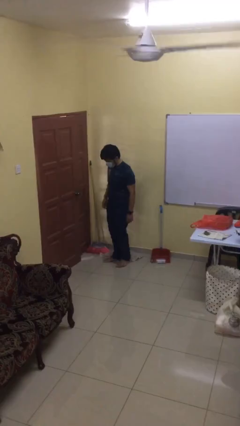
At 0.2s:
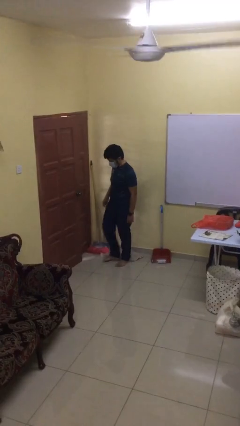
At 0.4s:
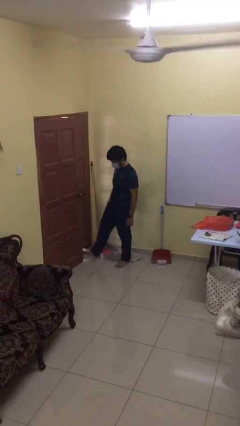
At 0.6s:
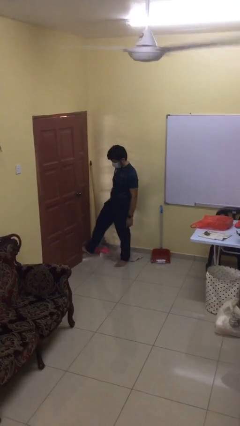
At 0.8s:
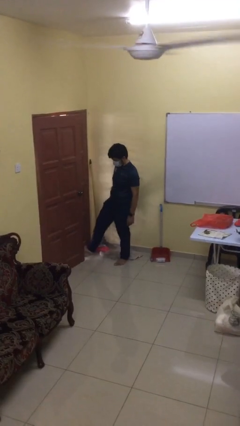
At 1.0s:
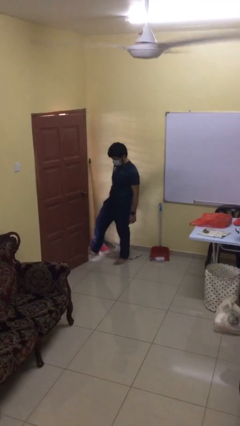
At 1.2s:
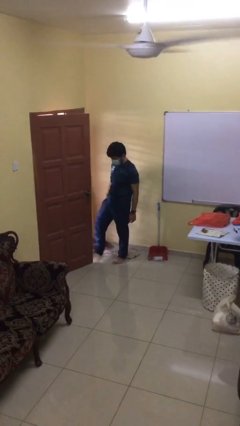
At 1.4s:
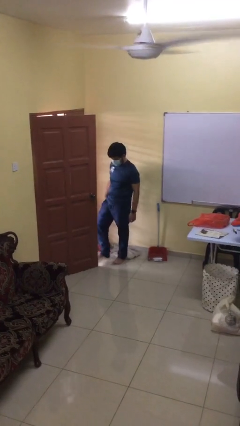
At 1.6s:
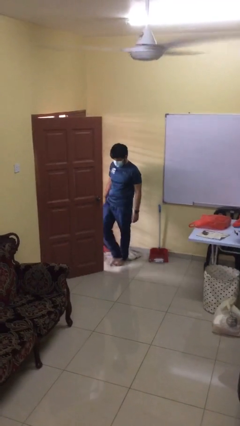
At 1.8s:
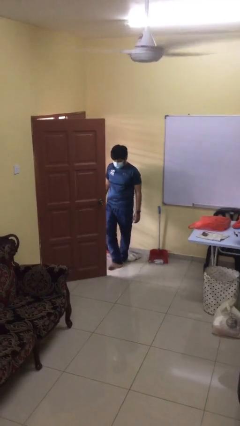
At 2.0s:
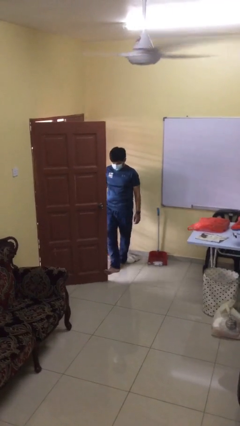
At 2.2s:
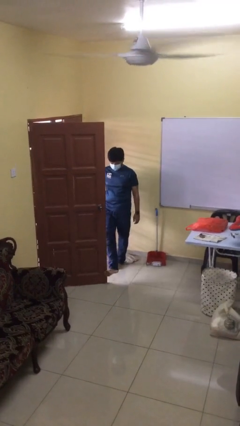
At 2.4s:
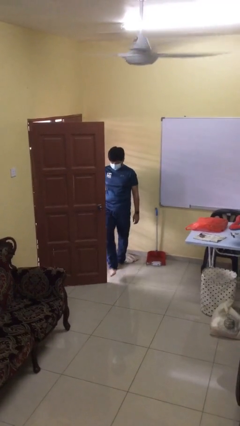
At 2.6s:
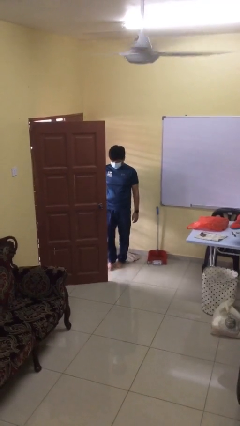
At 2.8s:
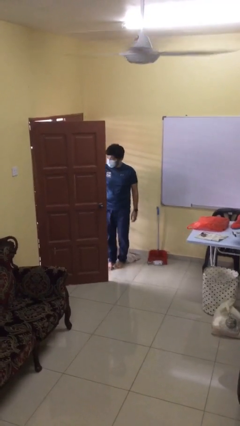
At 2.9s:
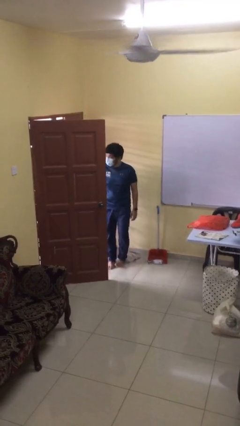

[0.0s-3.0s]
person opens facility door

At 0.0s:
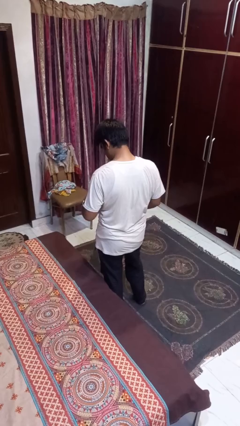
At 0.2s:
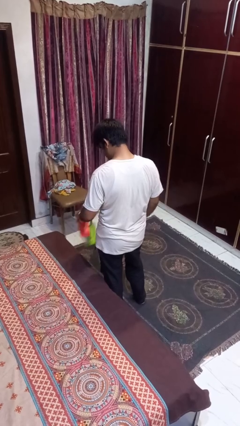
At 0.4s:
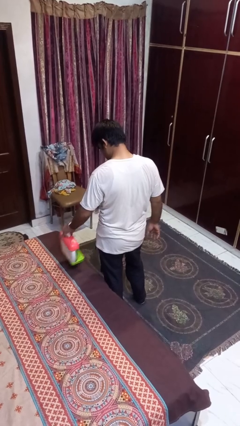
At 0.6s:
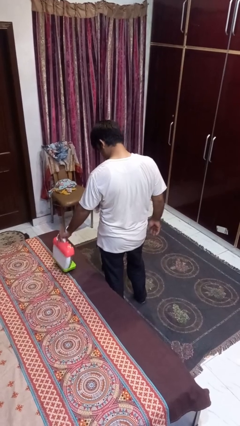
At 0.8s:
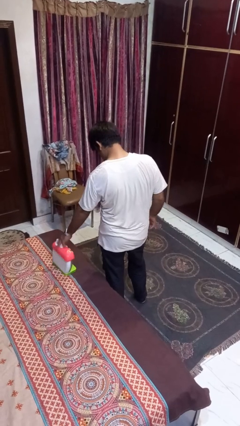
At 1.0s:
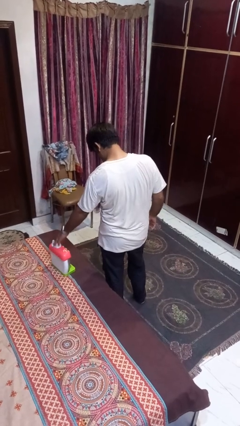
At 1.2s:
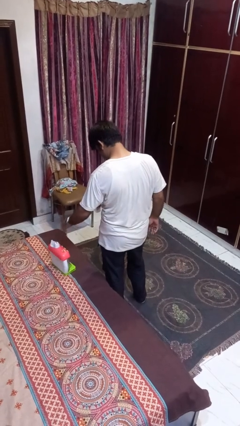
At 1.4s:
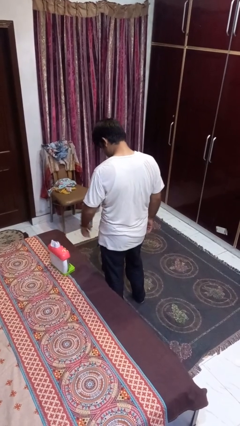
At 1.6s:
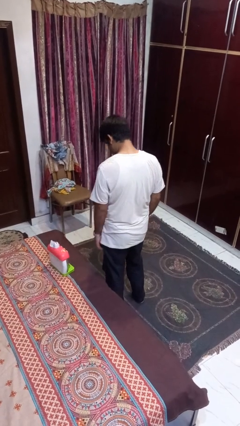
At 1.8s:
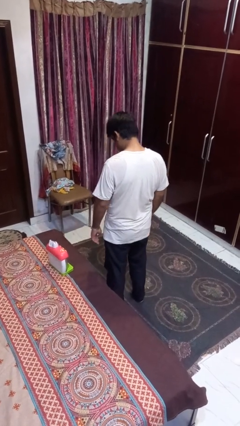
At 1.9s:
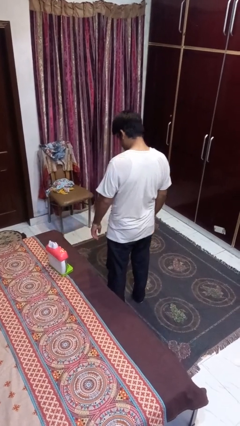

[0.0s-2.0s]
person puts down object on bed

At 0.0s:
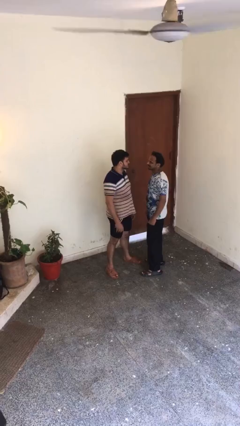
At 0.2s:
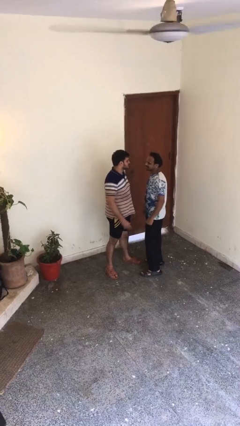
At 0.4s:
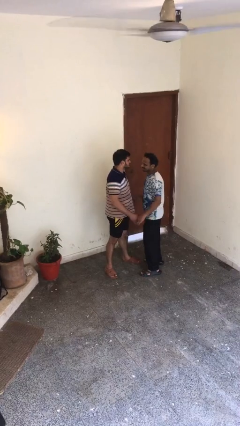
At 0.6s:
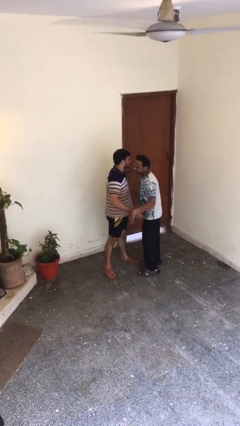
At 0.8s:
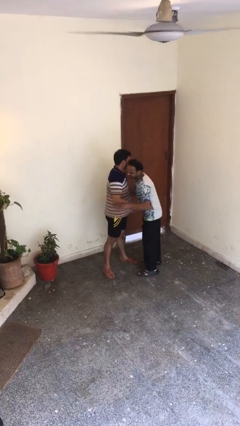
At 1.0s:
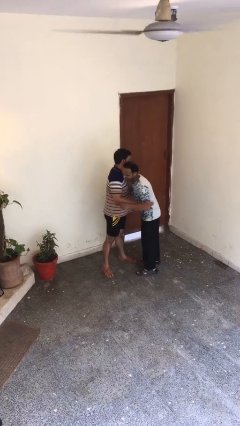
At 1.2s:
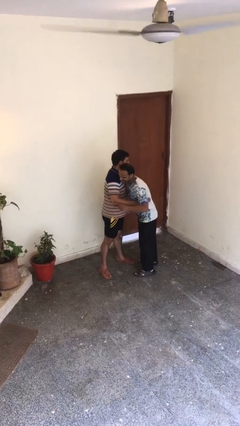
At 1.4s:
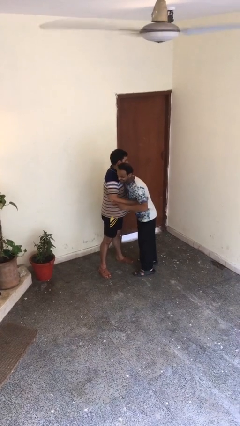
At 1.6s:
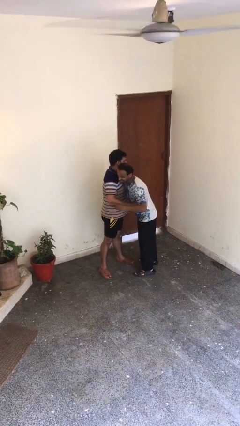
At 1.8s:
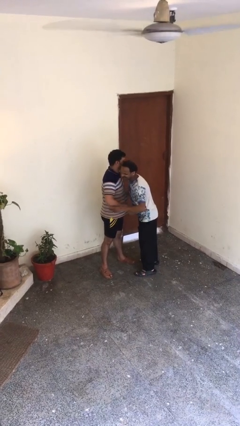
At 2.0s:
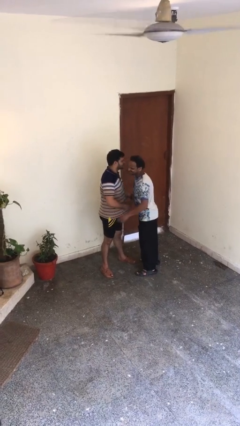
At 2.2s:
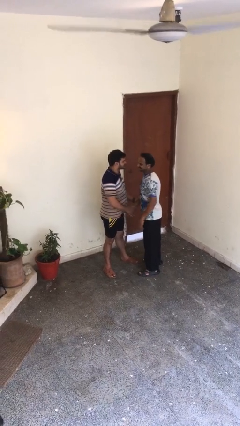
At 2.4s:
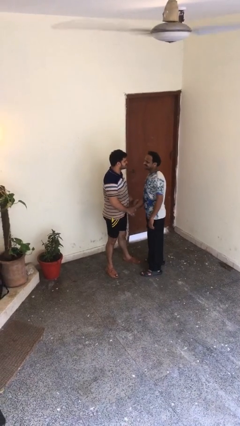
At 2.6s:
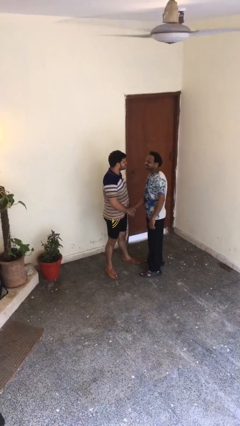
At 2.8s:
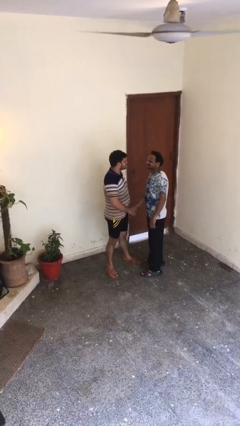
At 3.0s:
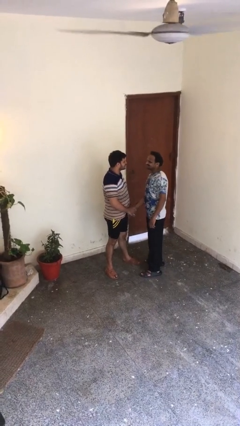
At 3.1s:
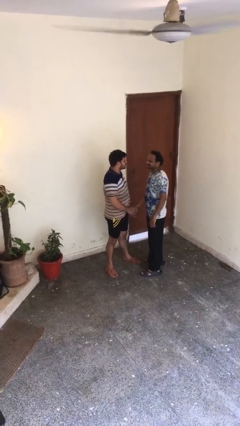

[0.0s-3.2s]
person embraces person

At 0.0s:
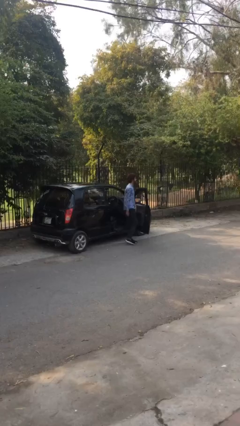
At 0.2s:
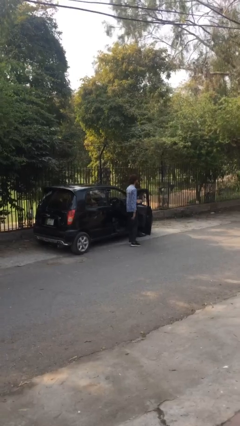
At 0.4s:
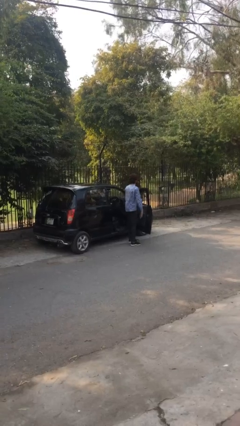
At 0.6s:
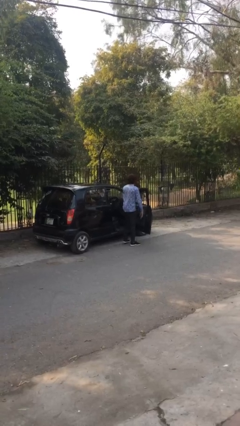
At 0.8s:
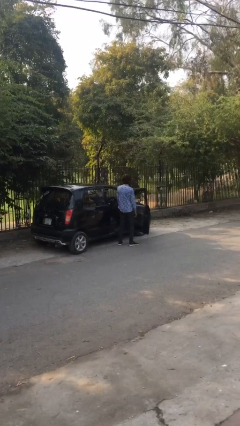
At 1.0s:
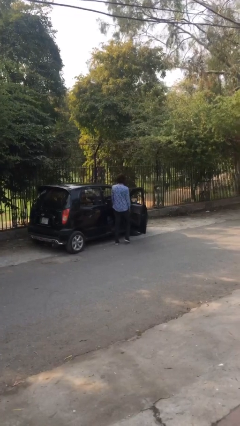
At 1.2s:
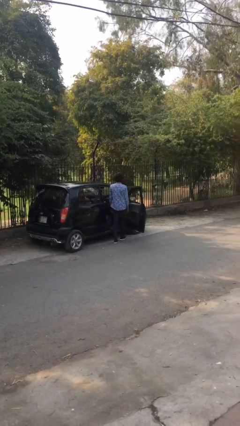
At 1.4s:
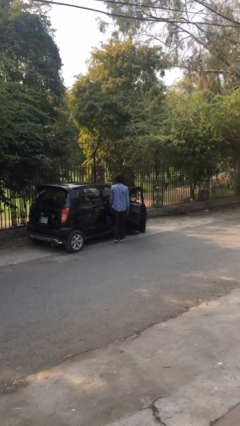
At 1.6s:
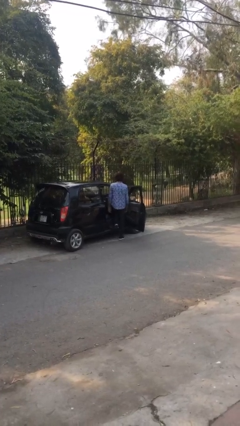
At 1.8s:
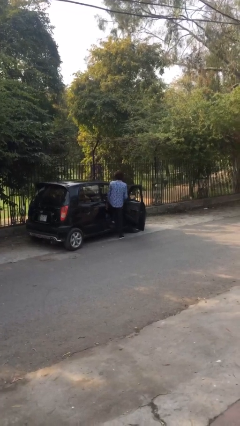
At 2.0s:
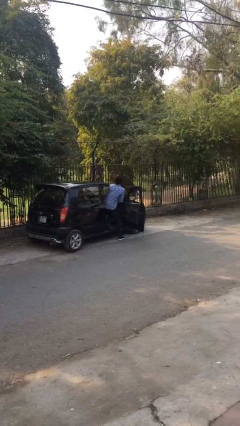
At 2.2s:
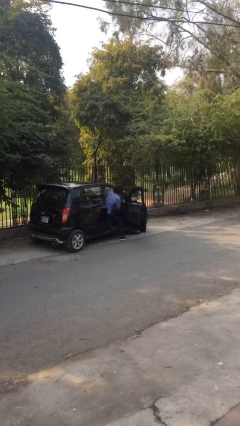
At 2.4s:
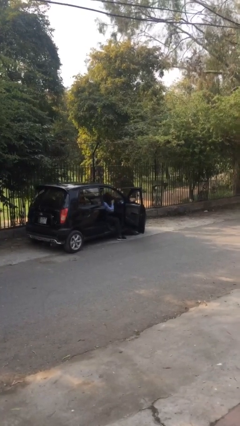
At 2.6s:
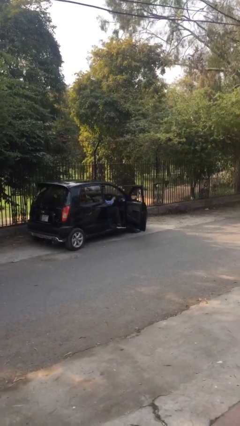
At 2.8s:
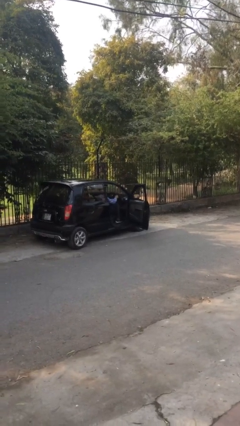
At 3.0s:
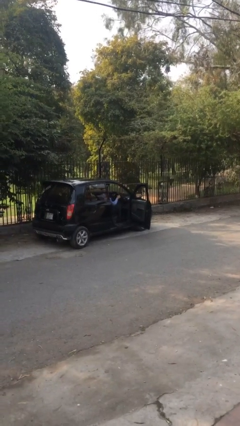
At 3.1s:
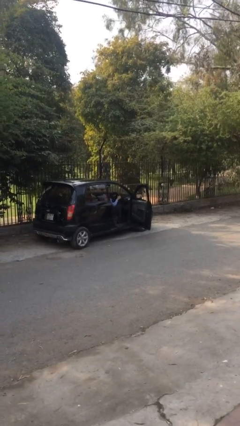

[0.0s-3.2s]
person enters car

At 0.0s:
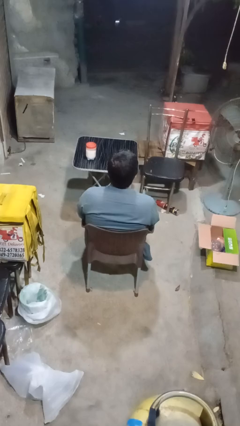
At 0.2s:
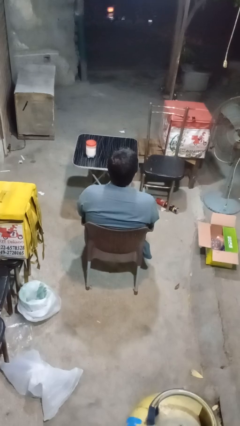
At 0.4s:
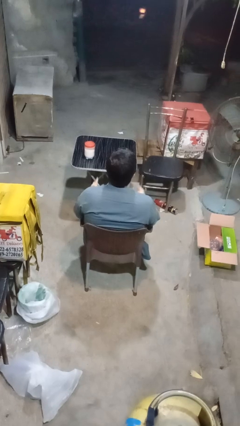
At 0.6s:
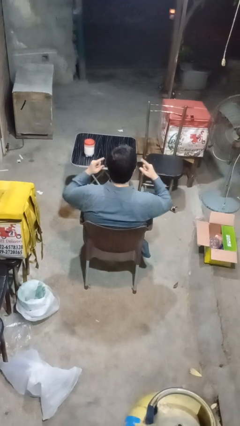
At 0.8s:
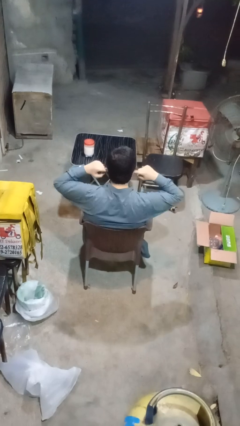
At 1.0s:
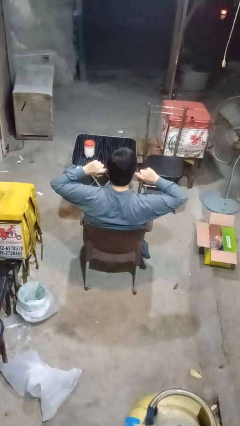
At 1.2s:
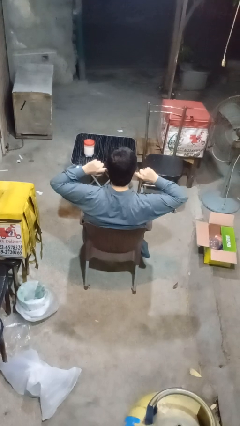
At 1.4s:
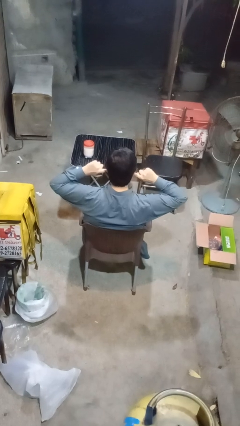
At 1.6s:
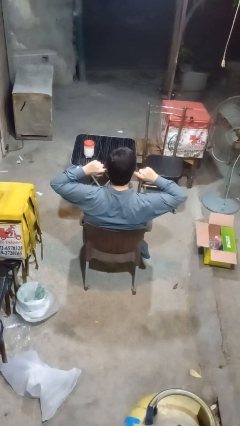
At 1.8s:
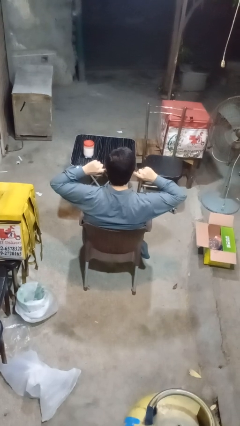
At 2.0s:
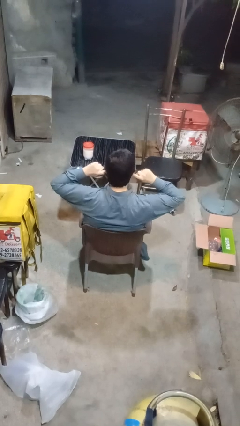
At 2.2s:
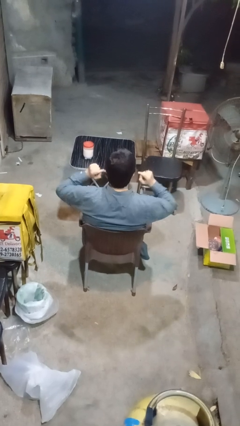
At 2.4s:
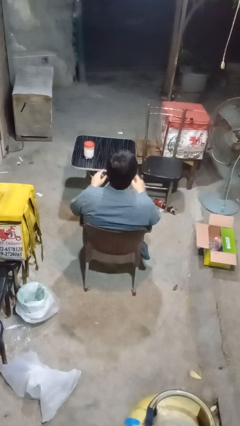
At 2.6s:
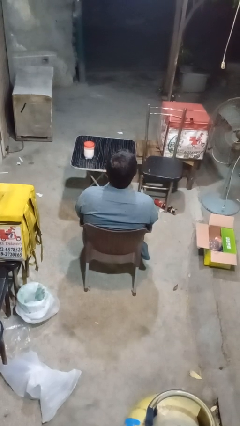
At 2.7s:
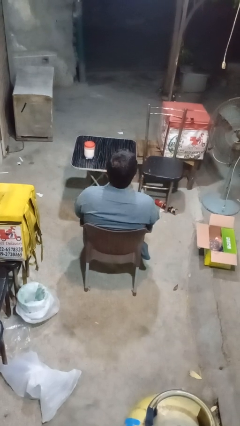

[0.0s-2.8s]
person puts fingers in ear

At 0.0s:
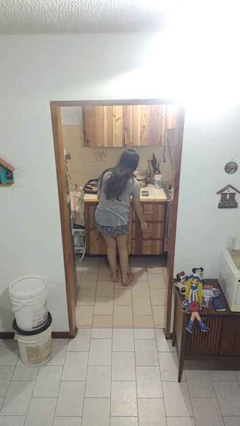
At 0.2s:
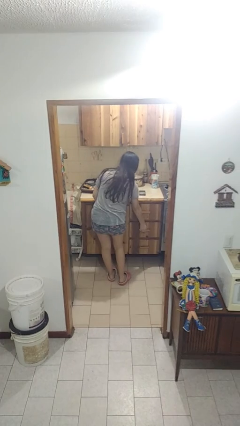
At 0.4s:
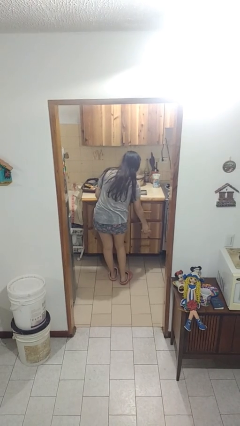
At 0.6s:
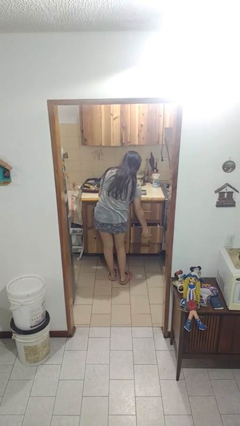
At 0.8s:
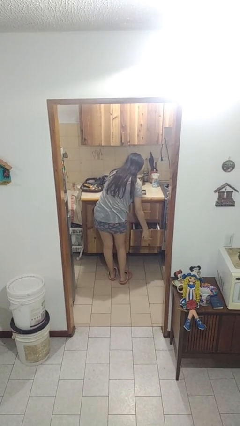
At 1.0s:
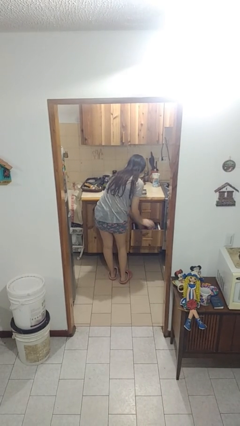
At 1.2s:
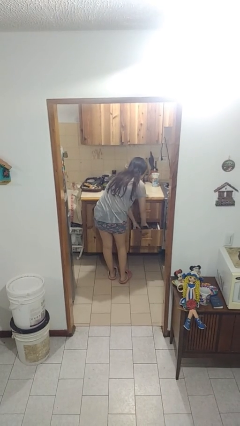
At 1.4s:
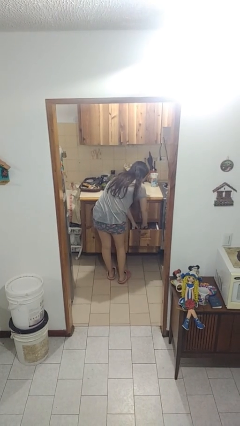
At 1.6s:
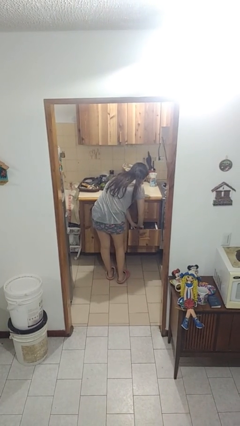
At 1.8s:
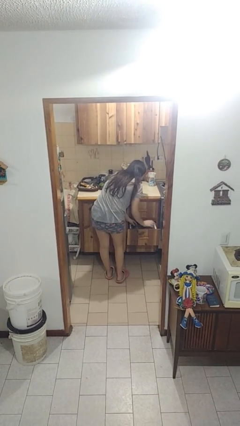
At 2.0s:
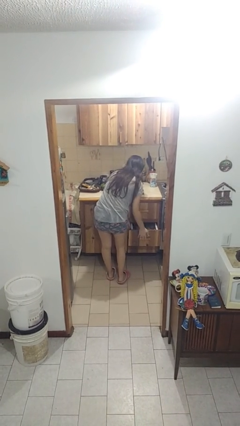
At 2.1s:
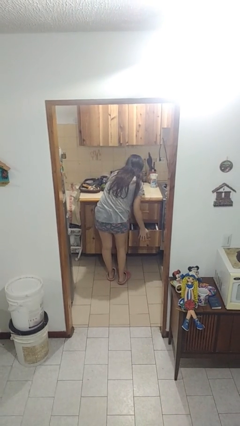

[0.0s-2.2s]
person searches in kitchen drawer

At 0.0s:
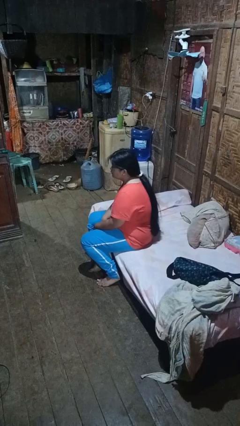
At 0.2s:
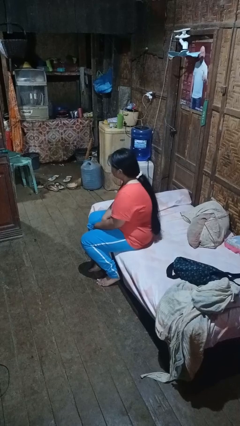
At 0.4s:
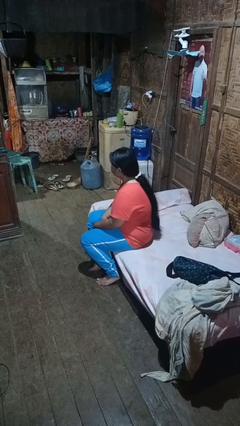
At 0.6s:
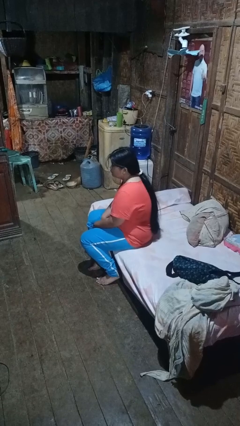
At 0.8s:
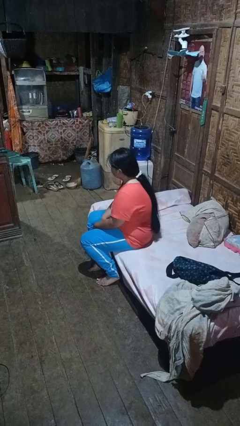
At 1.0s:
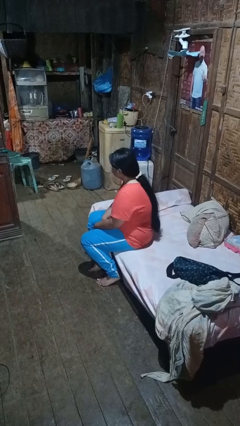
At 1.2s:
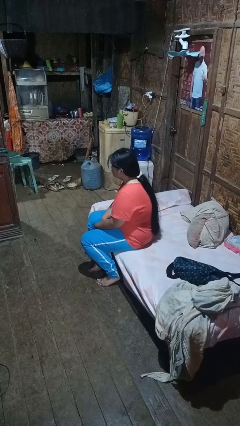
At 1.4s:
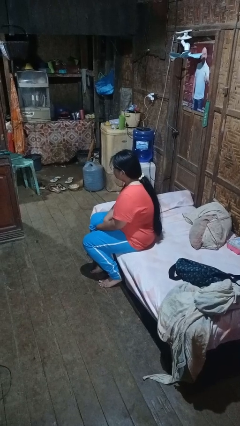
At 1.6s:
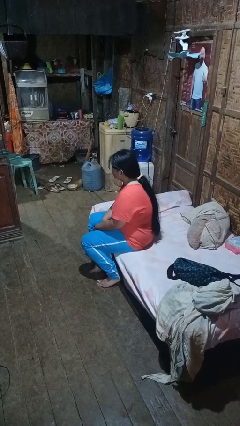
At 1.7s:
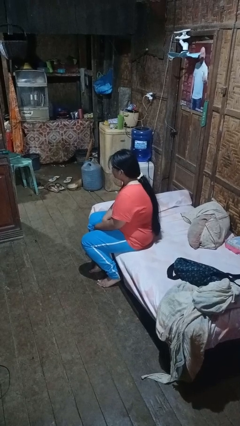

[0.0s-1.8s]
person shakes head
